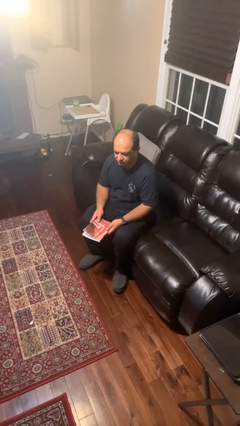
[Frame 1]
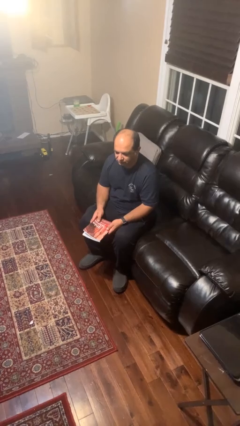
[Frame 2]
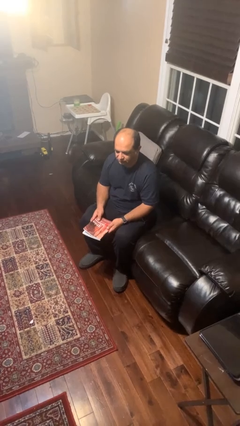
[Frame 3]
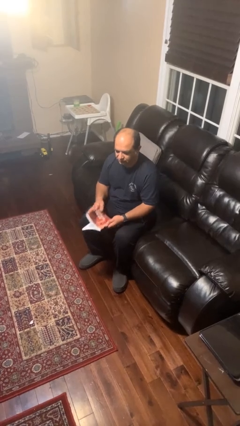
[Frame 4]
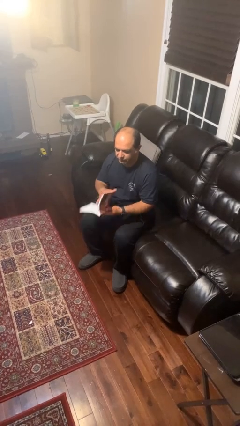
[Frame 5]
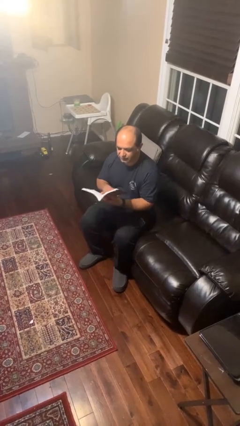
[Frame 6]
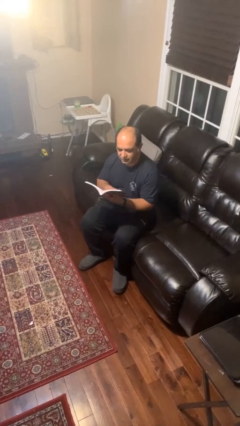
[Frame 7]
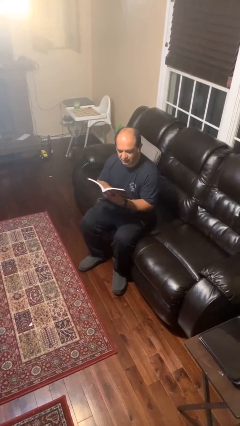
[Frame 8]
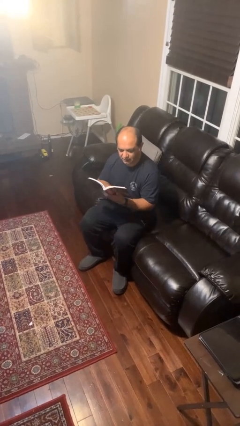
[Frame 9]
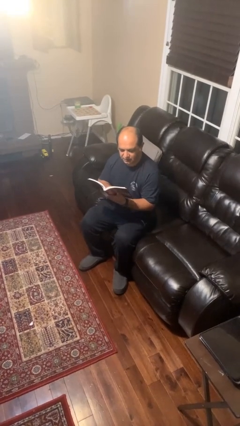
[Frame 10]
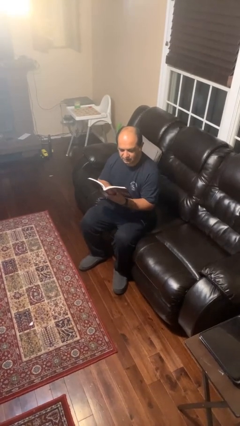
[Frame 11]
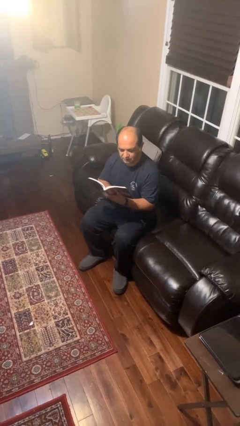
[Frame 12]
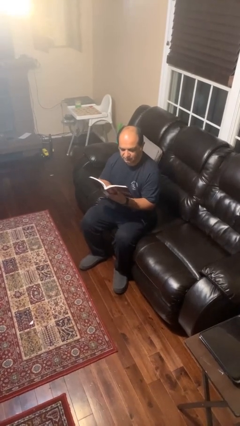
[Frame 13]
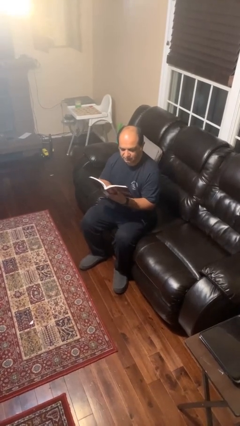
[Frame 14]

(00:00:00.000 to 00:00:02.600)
person reads document

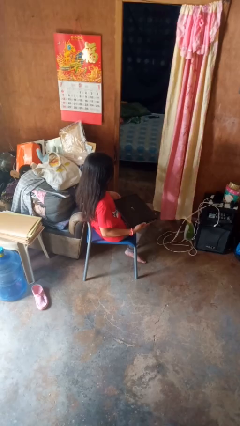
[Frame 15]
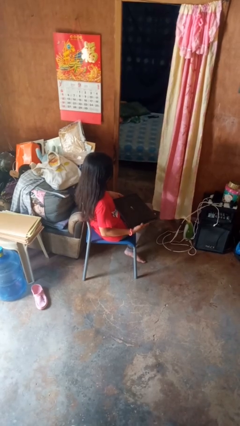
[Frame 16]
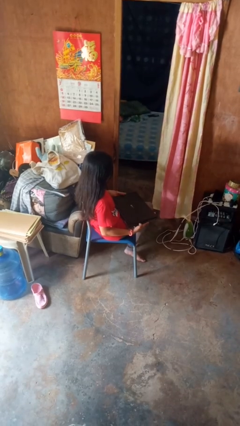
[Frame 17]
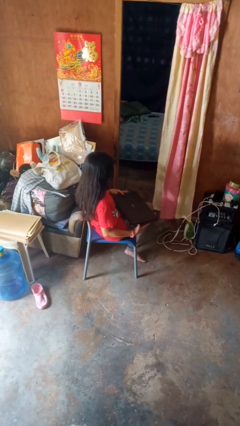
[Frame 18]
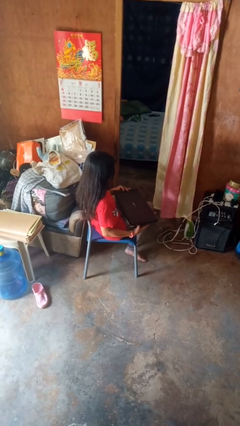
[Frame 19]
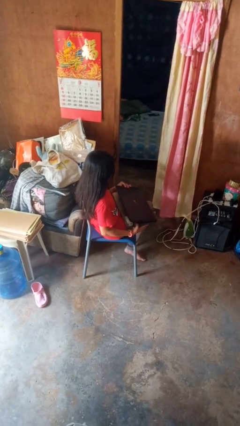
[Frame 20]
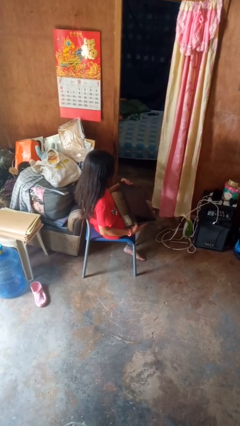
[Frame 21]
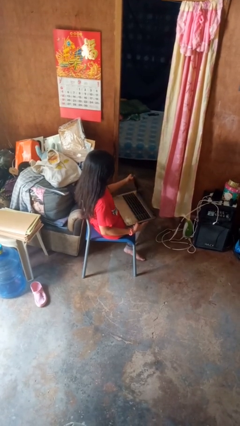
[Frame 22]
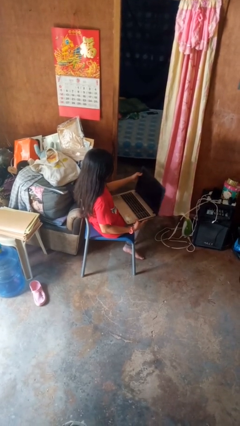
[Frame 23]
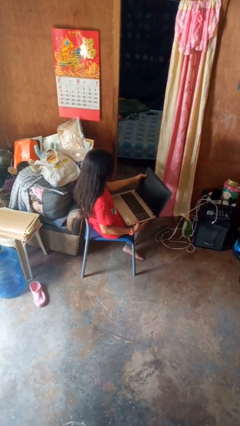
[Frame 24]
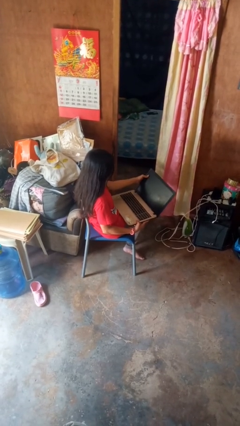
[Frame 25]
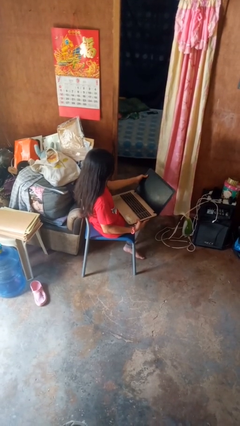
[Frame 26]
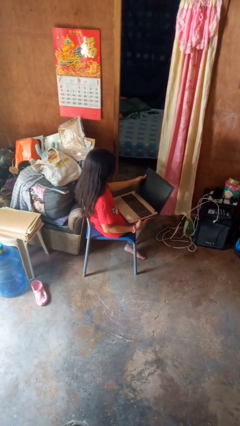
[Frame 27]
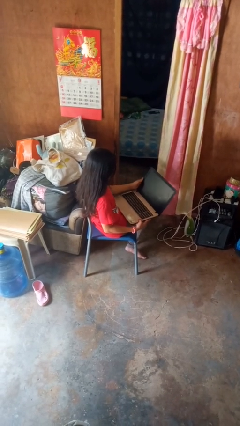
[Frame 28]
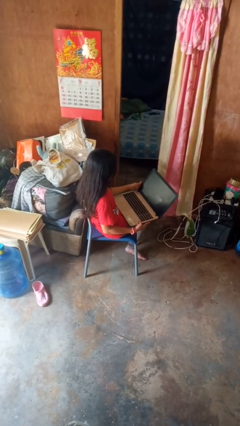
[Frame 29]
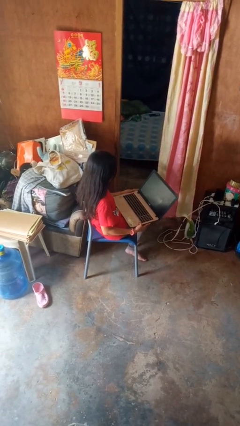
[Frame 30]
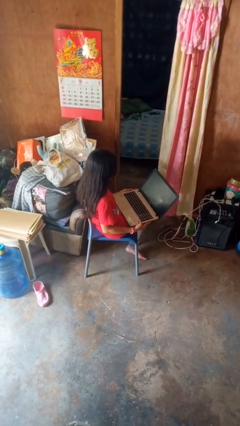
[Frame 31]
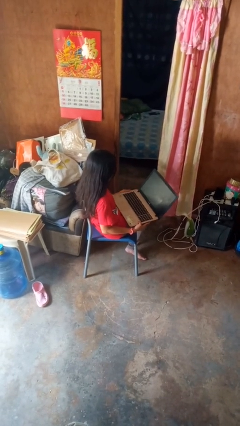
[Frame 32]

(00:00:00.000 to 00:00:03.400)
person opens laptop

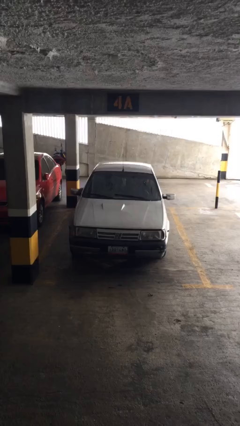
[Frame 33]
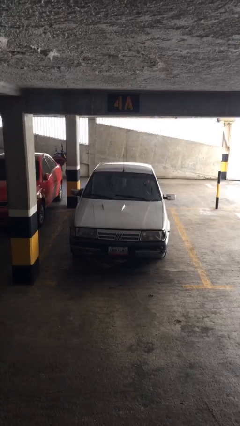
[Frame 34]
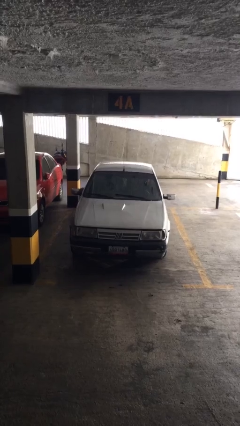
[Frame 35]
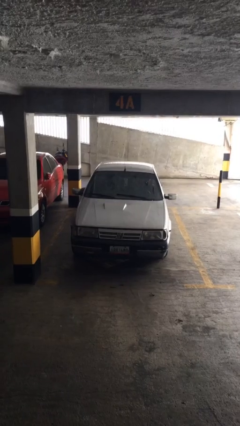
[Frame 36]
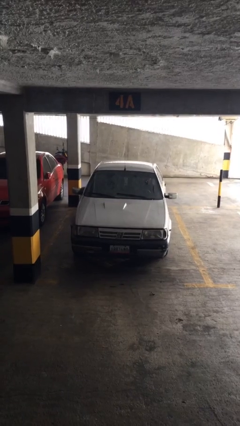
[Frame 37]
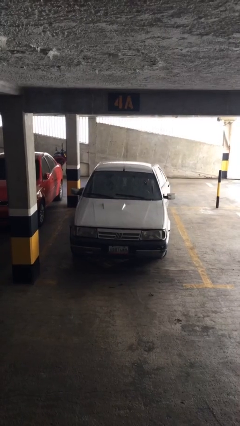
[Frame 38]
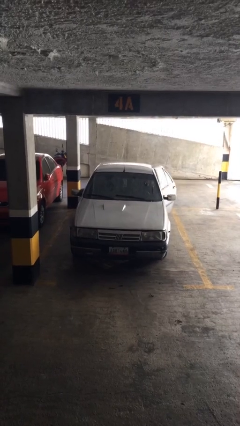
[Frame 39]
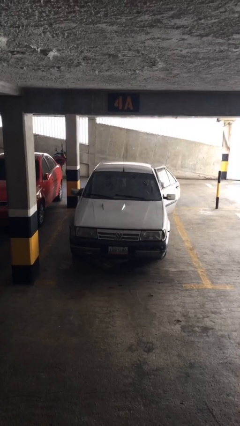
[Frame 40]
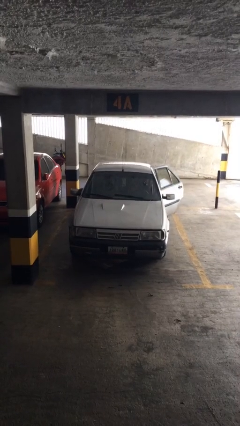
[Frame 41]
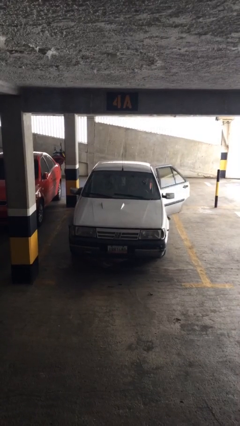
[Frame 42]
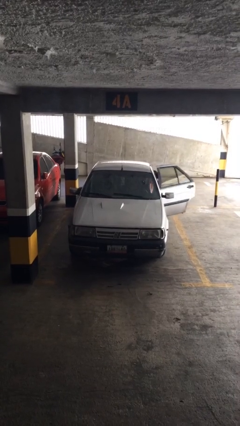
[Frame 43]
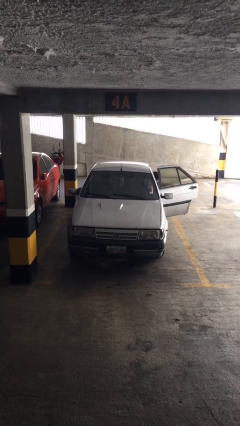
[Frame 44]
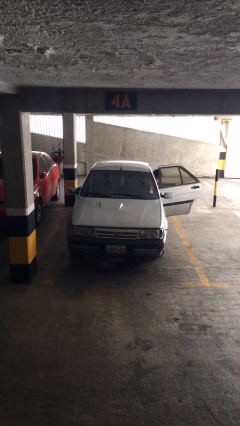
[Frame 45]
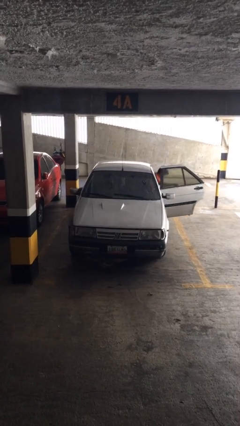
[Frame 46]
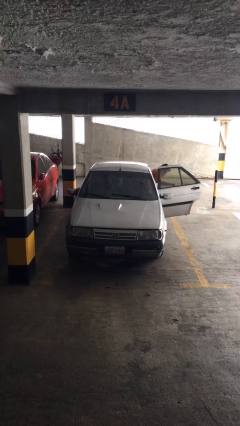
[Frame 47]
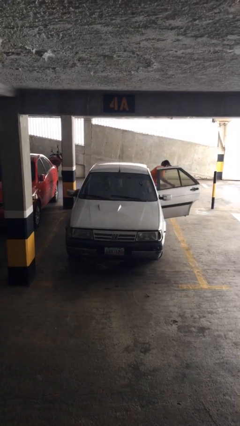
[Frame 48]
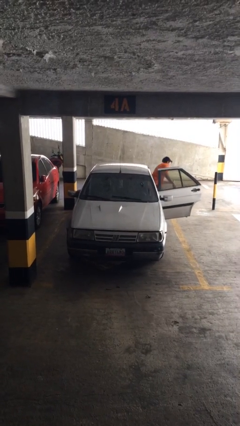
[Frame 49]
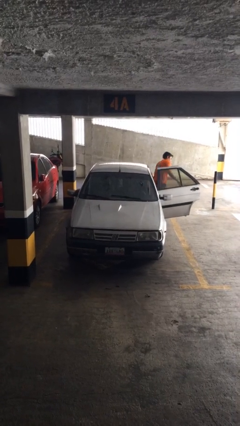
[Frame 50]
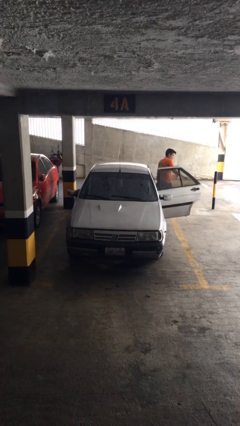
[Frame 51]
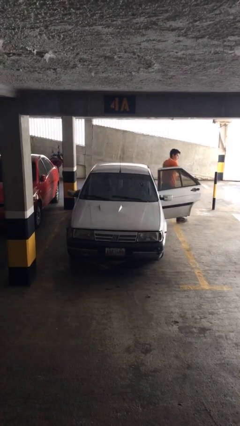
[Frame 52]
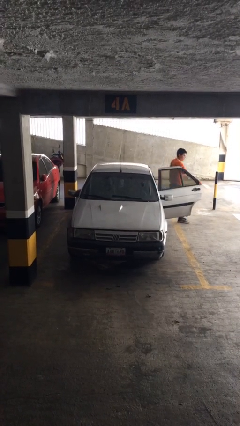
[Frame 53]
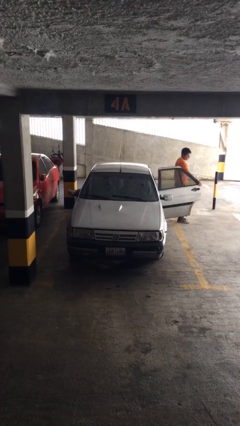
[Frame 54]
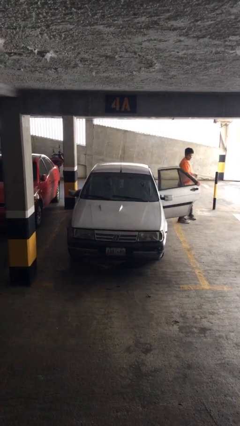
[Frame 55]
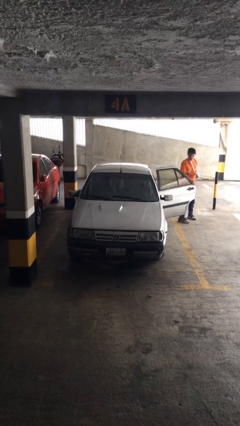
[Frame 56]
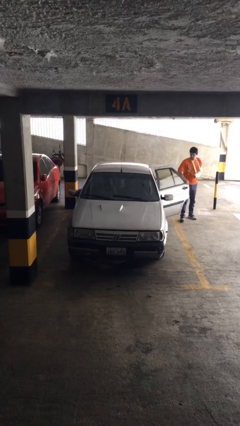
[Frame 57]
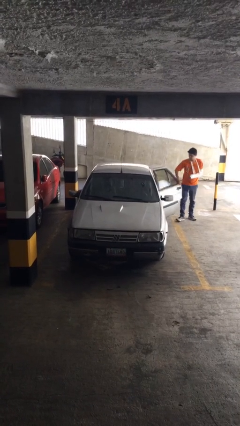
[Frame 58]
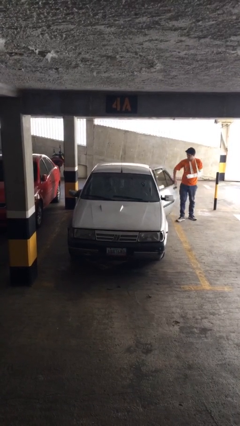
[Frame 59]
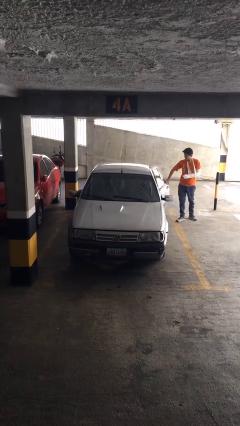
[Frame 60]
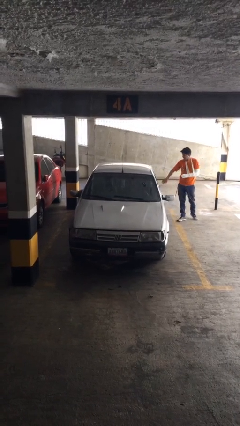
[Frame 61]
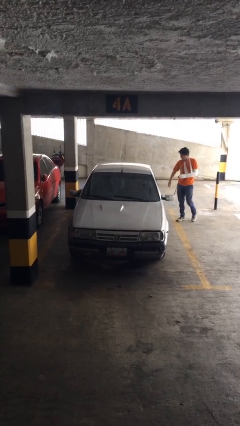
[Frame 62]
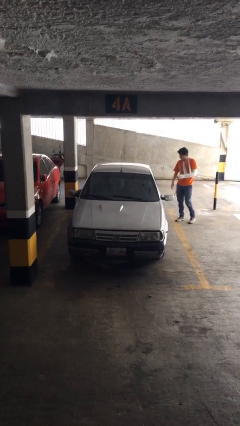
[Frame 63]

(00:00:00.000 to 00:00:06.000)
car drops off person

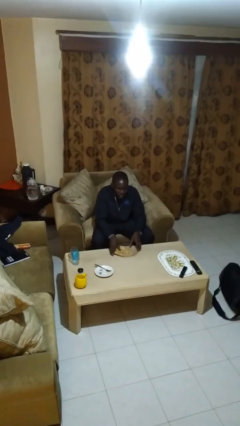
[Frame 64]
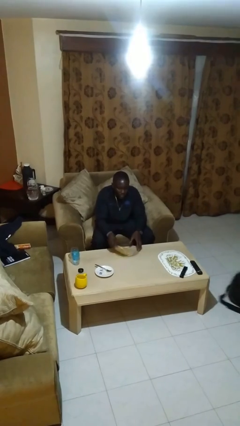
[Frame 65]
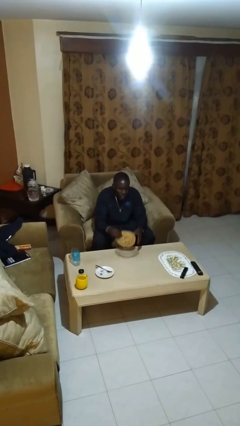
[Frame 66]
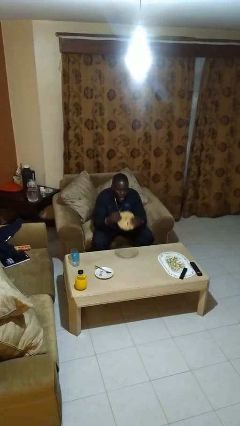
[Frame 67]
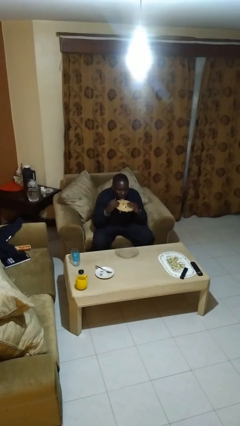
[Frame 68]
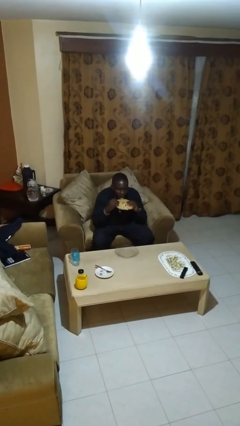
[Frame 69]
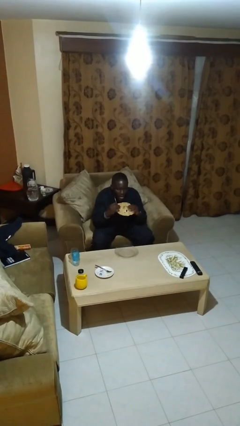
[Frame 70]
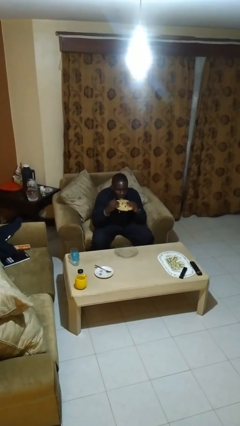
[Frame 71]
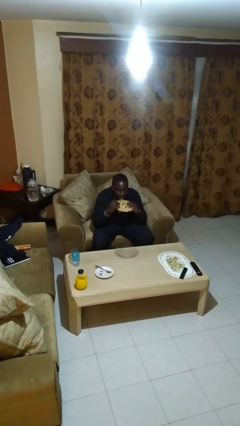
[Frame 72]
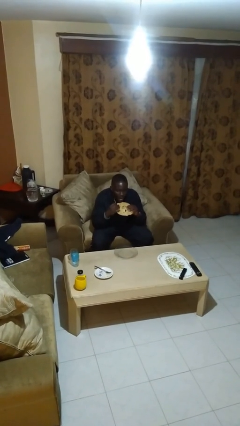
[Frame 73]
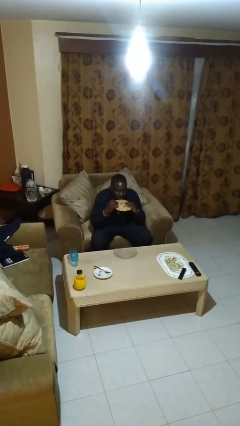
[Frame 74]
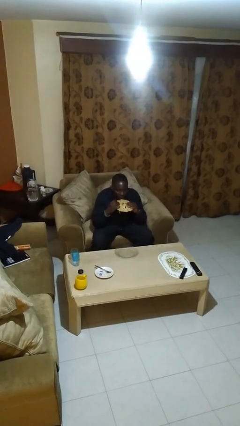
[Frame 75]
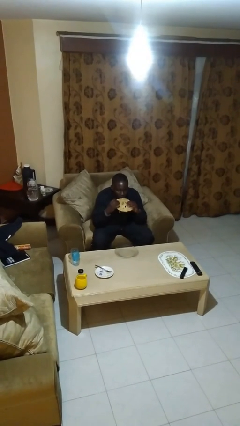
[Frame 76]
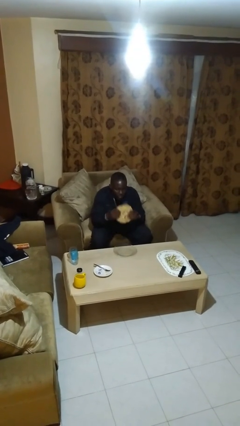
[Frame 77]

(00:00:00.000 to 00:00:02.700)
person eats with hands

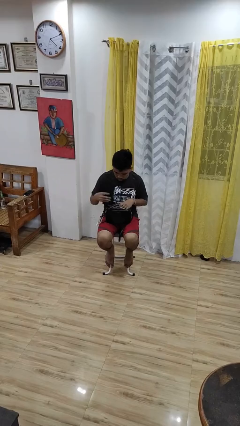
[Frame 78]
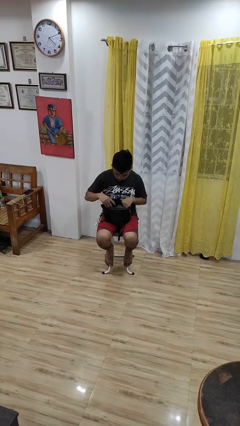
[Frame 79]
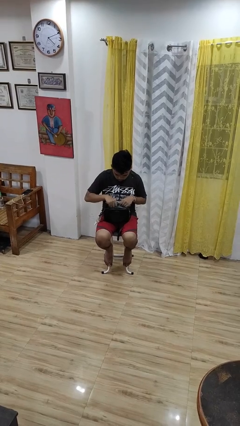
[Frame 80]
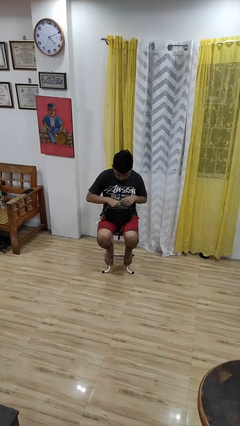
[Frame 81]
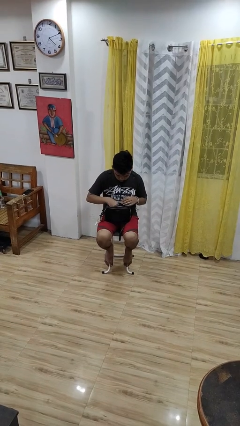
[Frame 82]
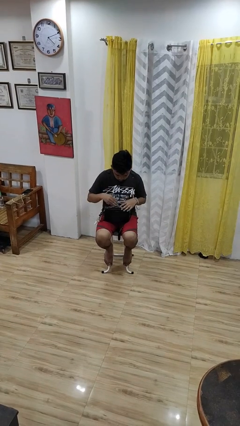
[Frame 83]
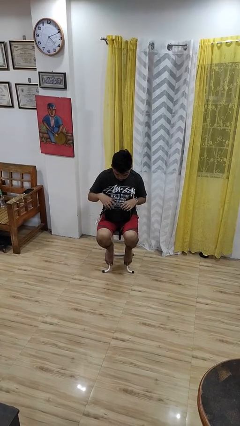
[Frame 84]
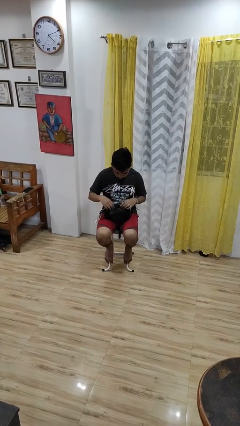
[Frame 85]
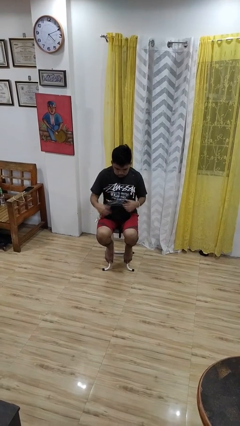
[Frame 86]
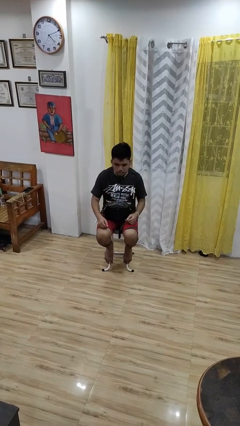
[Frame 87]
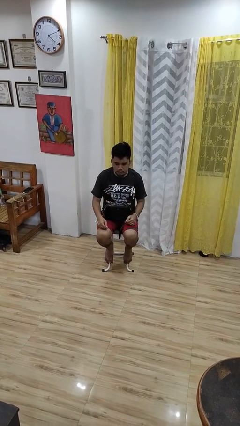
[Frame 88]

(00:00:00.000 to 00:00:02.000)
person puts object into purse

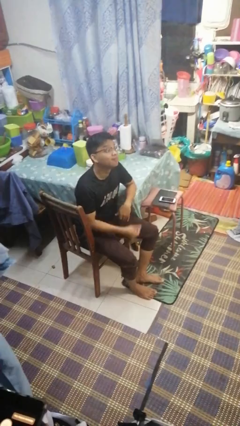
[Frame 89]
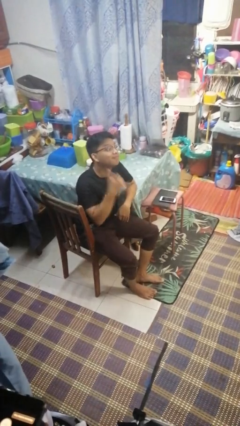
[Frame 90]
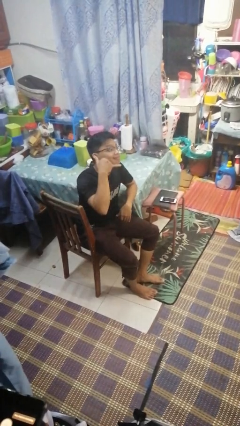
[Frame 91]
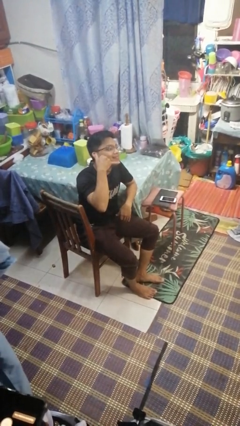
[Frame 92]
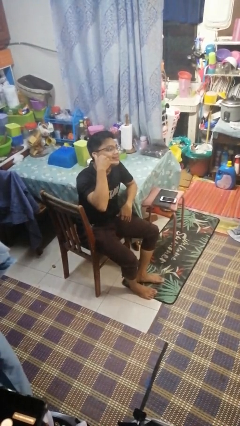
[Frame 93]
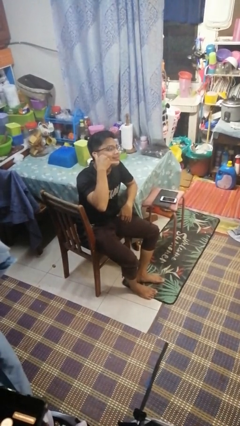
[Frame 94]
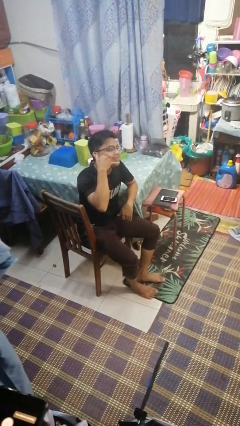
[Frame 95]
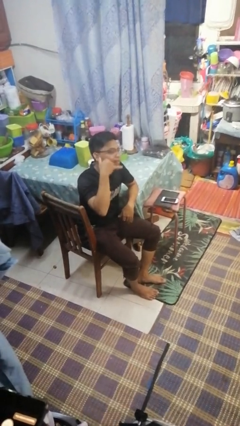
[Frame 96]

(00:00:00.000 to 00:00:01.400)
person gestures call me
